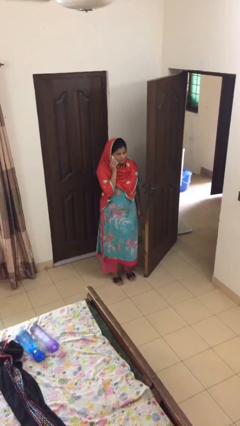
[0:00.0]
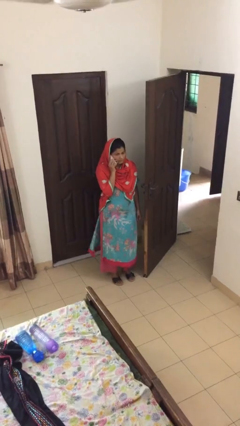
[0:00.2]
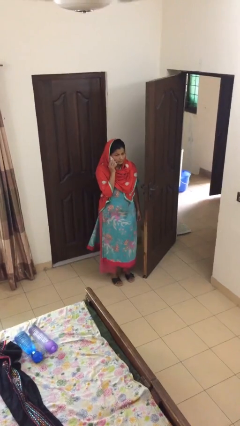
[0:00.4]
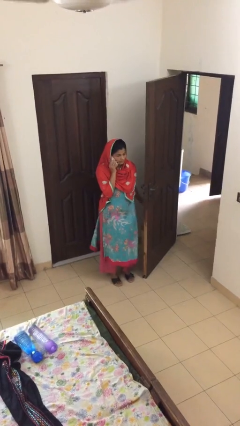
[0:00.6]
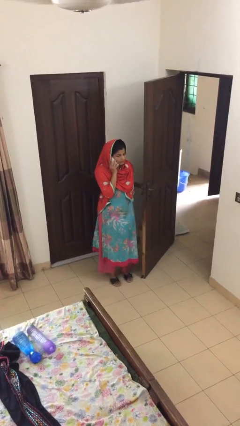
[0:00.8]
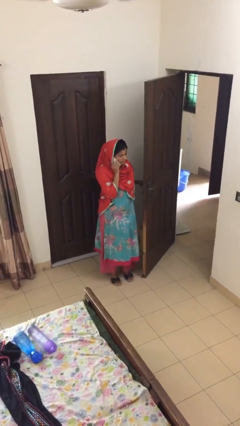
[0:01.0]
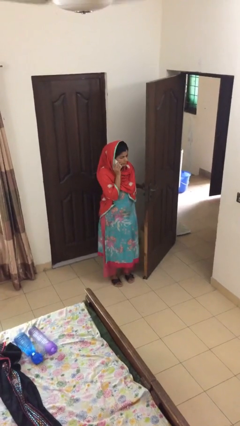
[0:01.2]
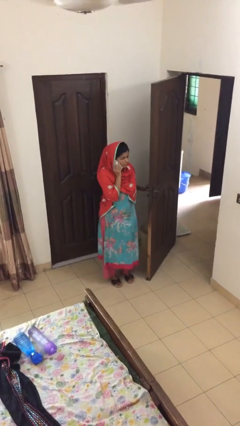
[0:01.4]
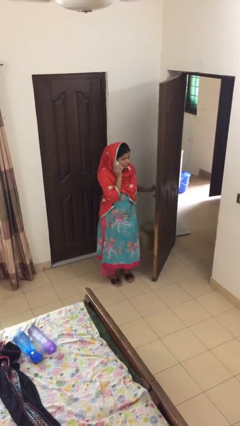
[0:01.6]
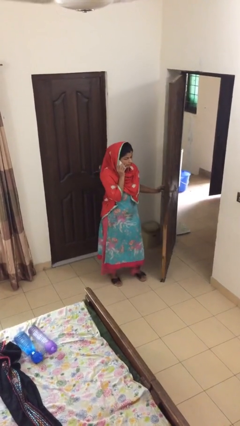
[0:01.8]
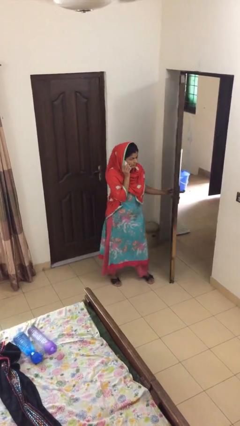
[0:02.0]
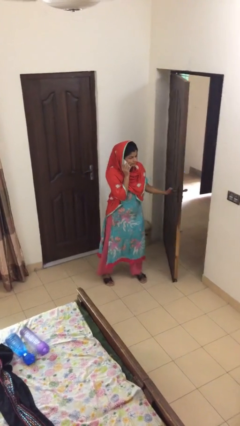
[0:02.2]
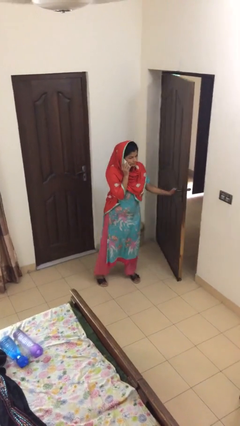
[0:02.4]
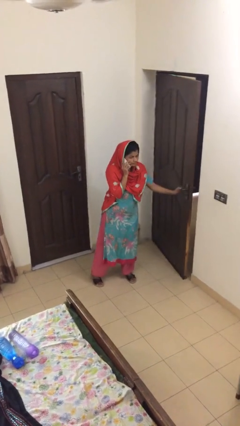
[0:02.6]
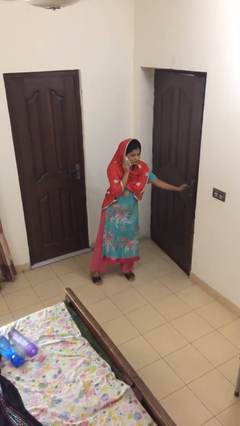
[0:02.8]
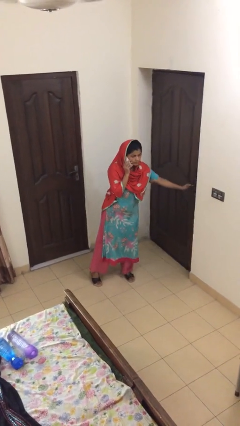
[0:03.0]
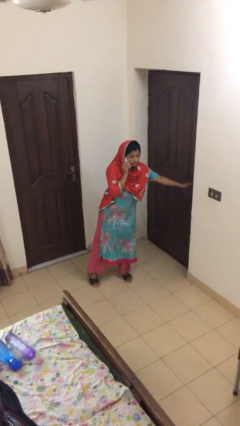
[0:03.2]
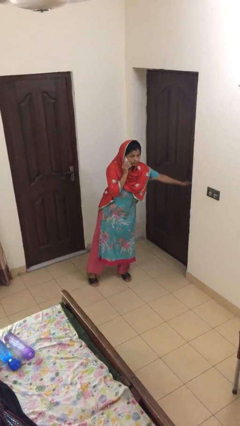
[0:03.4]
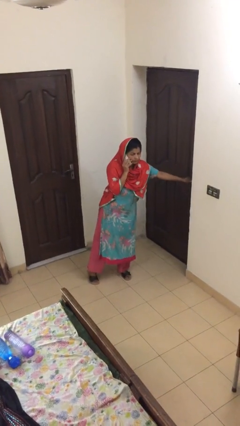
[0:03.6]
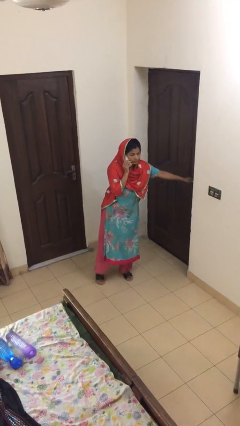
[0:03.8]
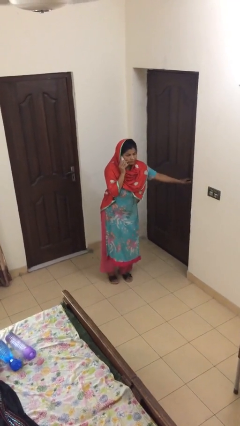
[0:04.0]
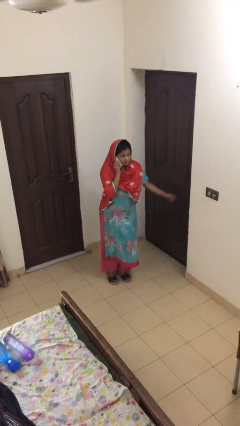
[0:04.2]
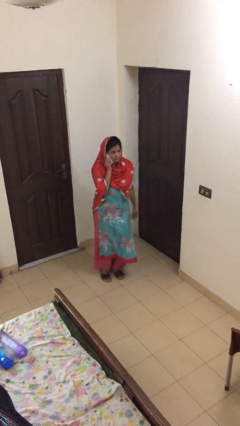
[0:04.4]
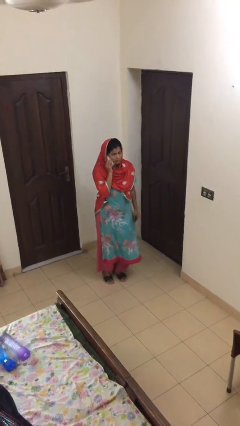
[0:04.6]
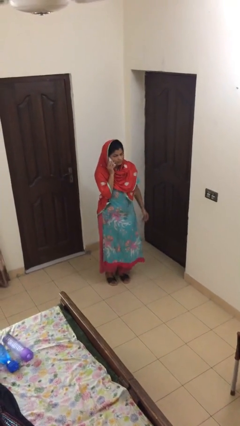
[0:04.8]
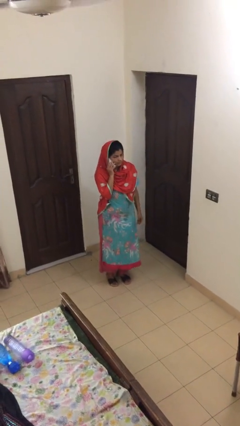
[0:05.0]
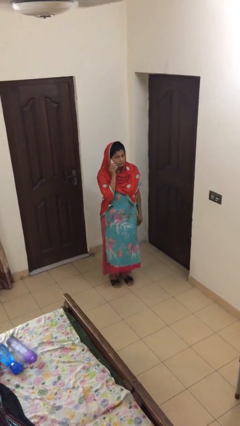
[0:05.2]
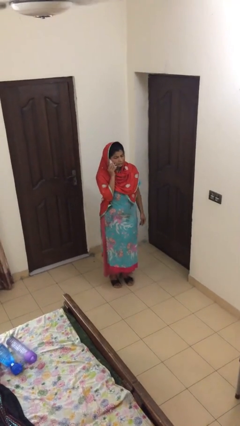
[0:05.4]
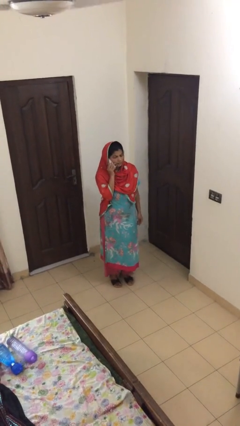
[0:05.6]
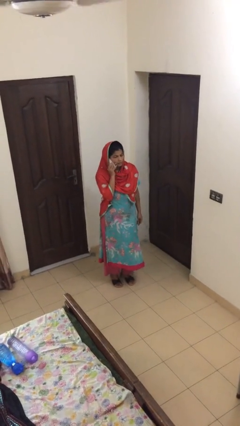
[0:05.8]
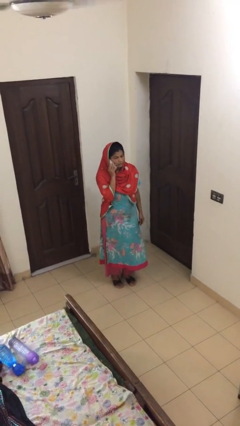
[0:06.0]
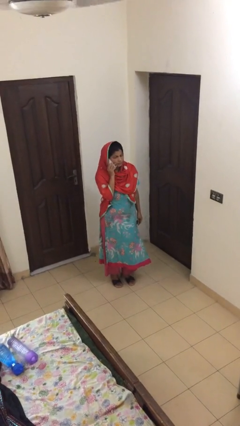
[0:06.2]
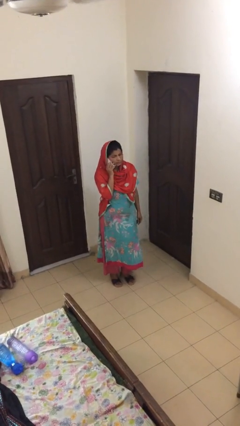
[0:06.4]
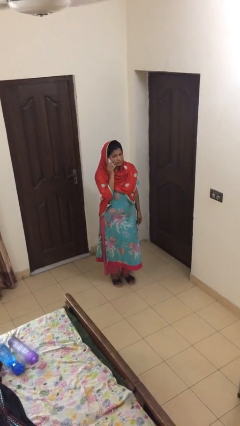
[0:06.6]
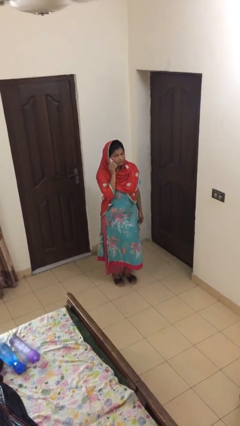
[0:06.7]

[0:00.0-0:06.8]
person closes facility door

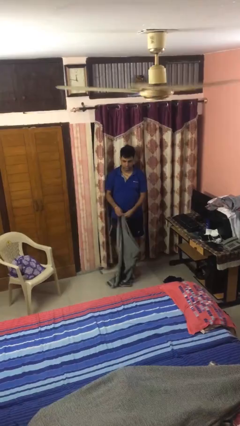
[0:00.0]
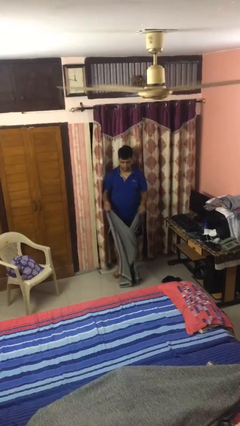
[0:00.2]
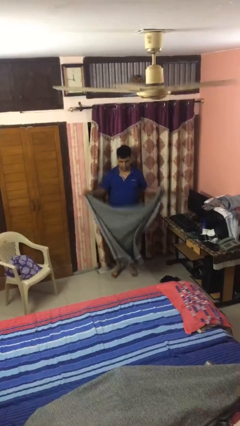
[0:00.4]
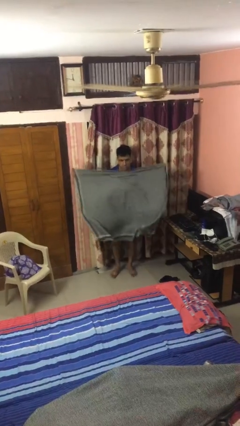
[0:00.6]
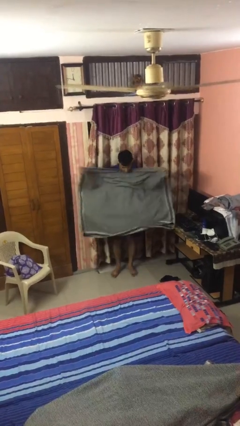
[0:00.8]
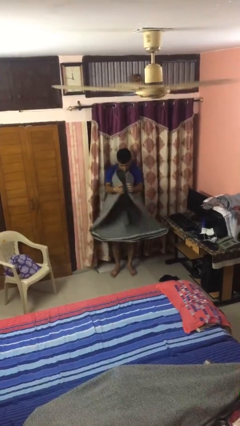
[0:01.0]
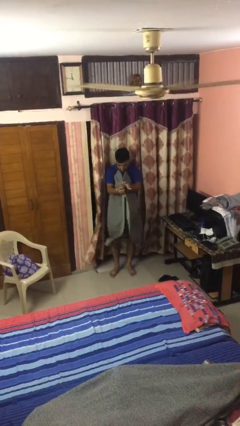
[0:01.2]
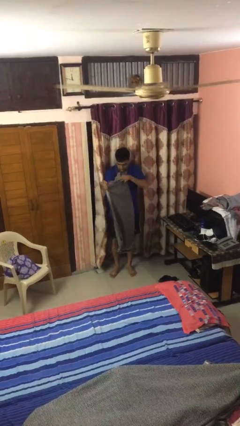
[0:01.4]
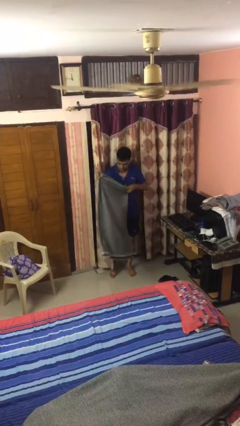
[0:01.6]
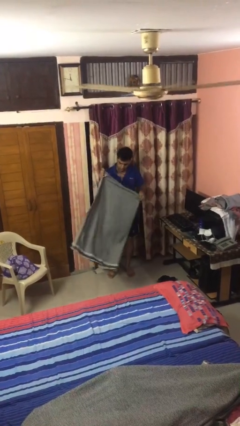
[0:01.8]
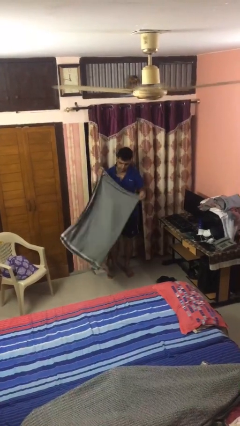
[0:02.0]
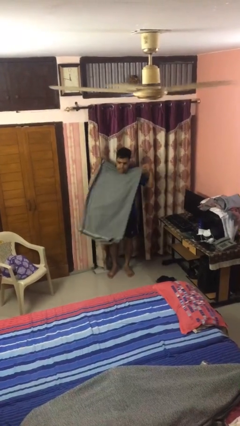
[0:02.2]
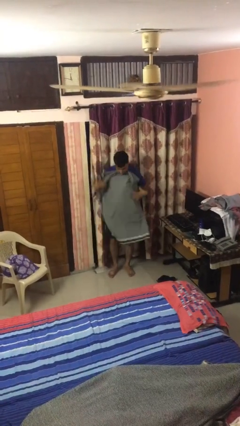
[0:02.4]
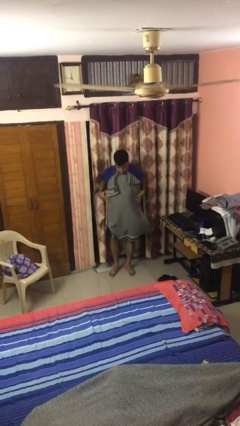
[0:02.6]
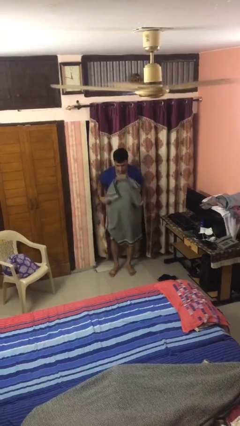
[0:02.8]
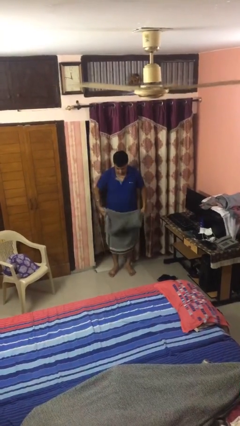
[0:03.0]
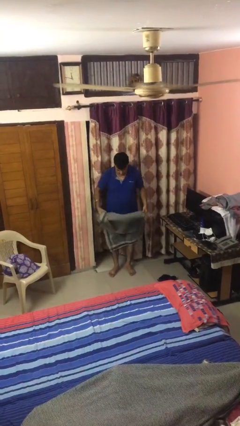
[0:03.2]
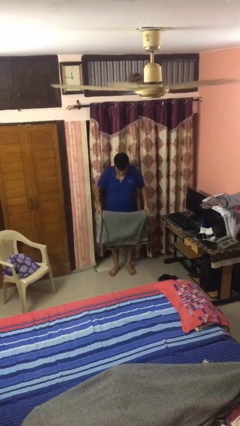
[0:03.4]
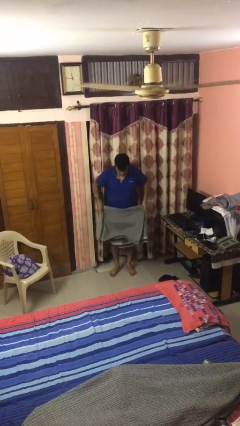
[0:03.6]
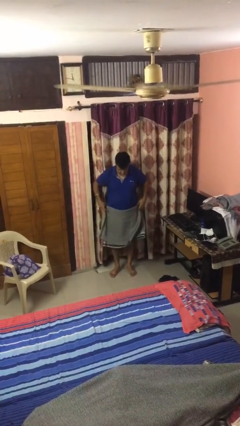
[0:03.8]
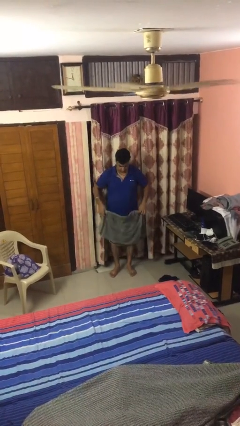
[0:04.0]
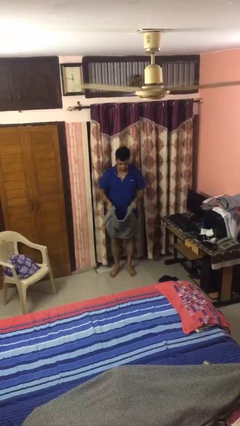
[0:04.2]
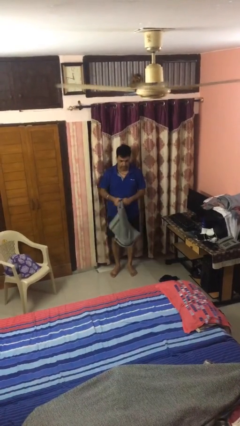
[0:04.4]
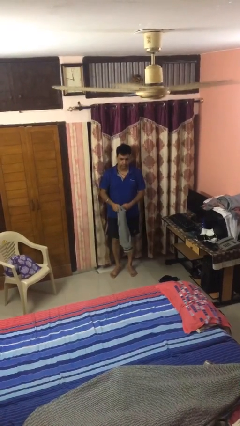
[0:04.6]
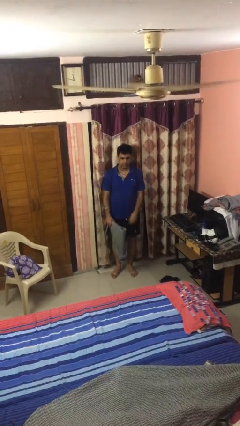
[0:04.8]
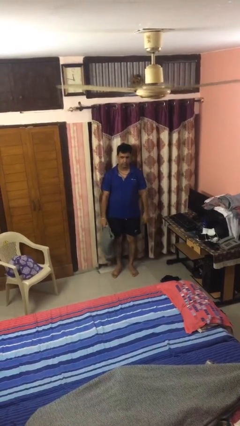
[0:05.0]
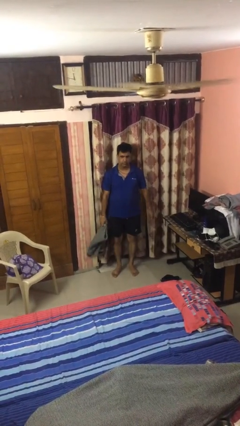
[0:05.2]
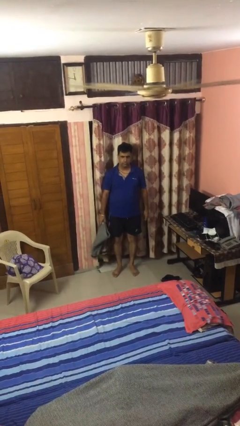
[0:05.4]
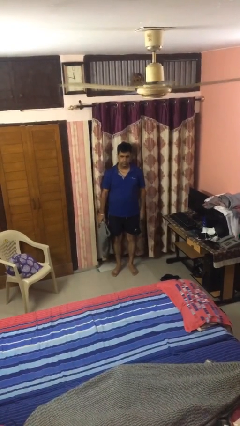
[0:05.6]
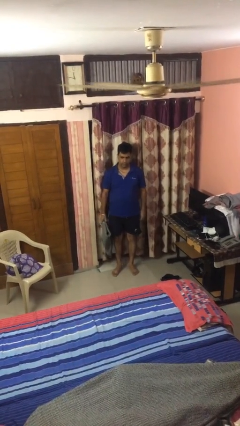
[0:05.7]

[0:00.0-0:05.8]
person folds blanket

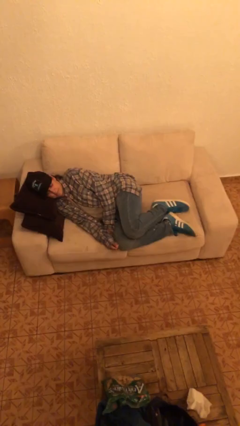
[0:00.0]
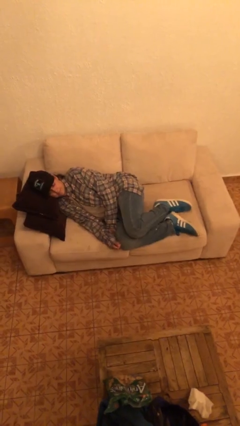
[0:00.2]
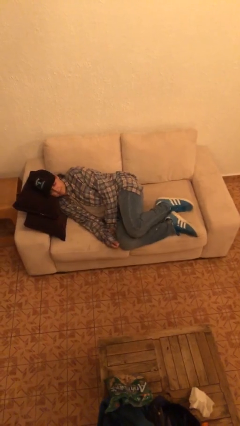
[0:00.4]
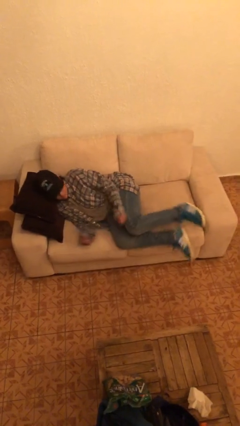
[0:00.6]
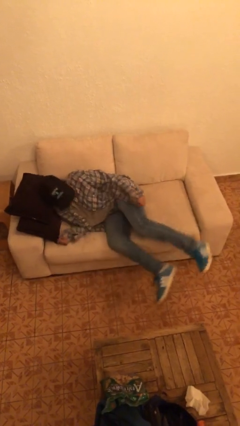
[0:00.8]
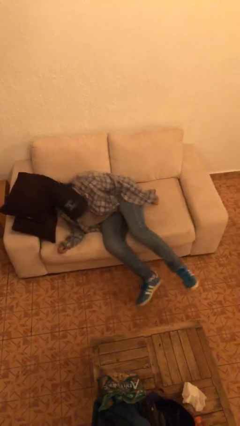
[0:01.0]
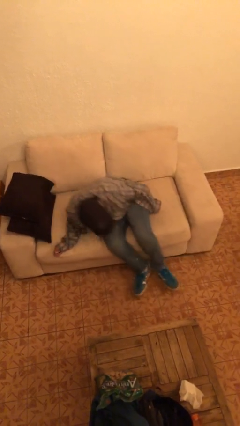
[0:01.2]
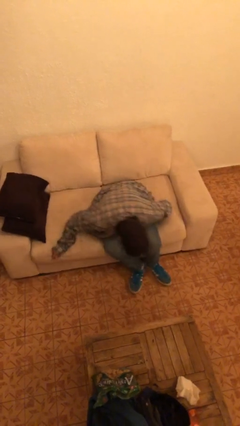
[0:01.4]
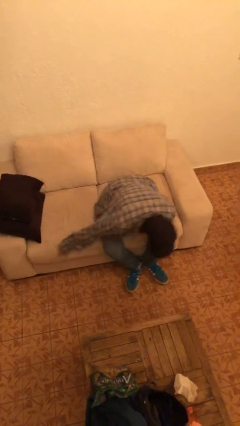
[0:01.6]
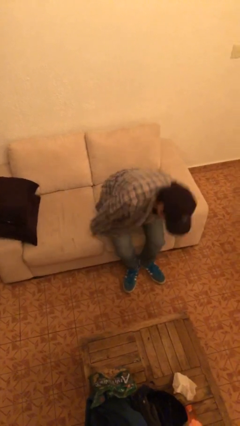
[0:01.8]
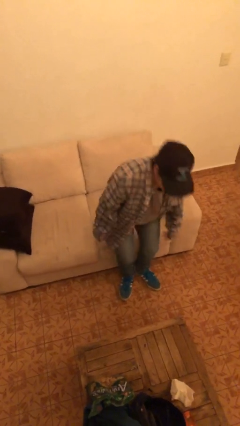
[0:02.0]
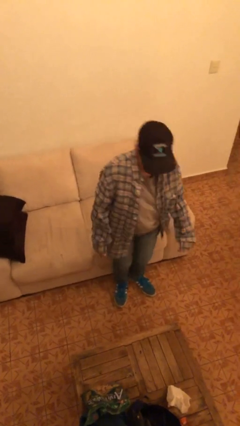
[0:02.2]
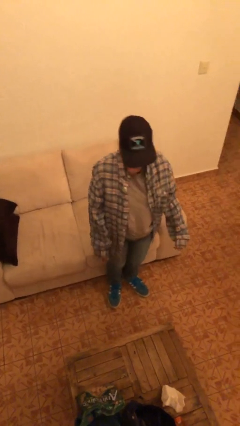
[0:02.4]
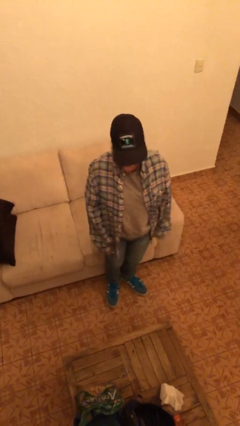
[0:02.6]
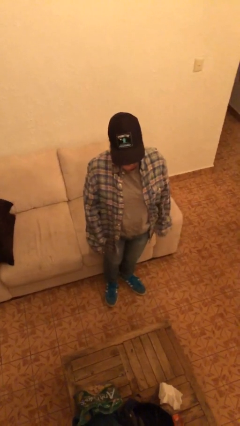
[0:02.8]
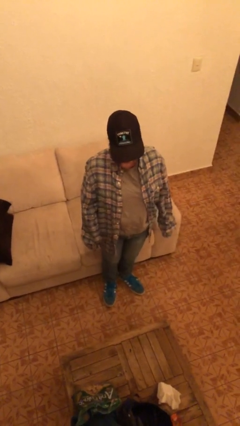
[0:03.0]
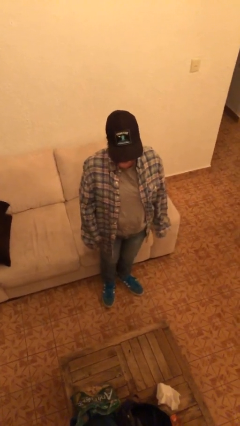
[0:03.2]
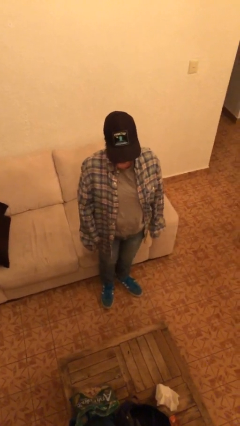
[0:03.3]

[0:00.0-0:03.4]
person stands up

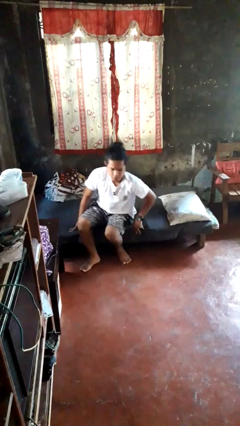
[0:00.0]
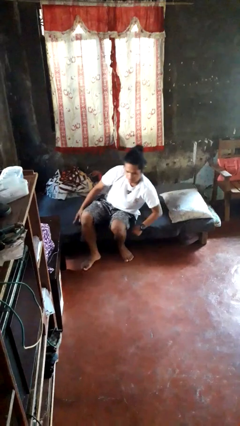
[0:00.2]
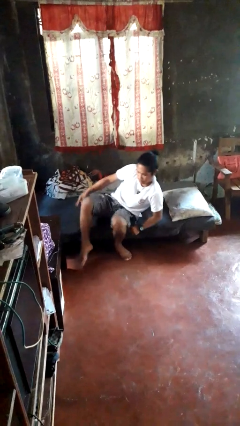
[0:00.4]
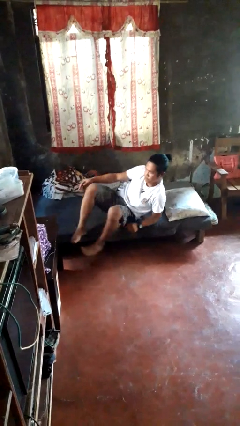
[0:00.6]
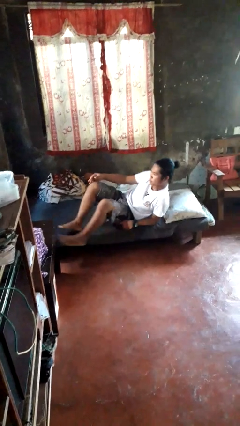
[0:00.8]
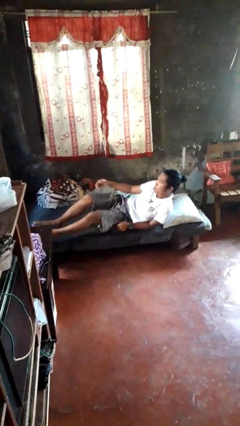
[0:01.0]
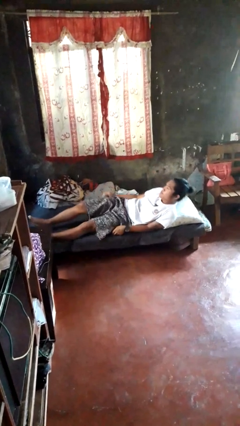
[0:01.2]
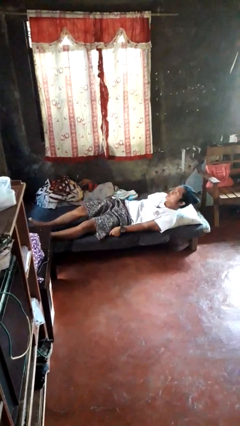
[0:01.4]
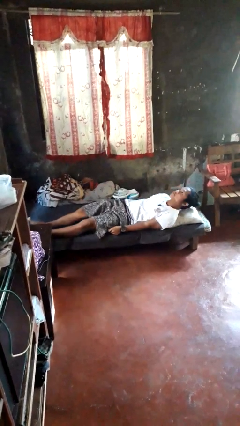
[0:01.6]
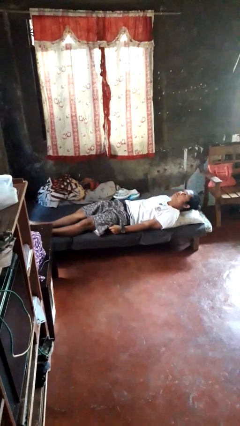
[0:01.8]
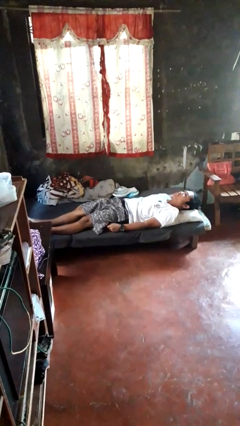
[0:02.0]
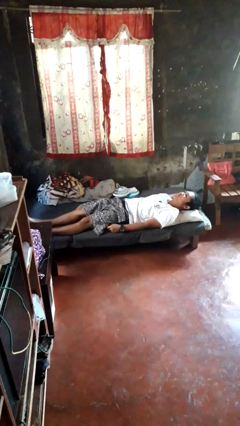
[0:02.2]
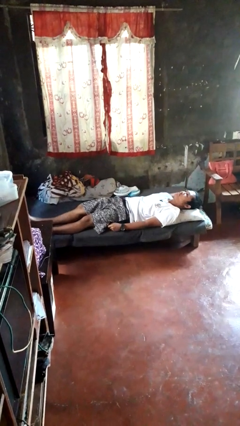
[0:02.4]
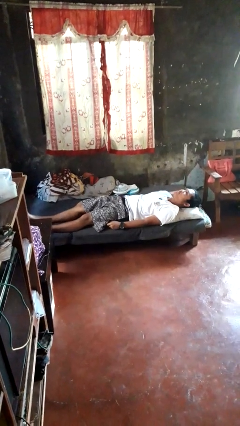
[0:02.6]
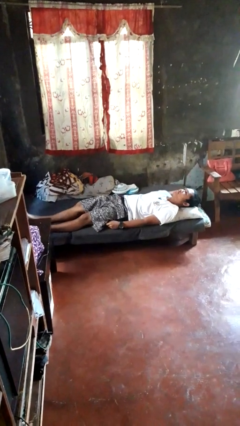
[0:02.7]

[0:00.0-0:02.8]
person lies down on bed
